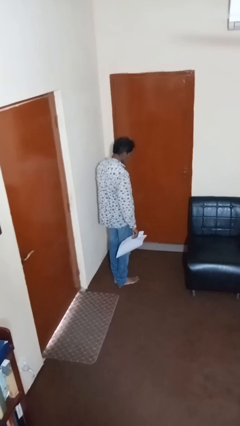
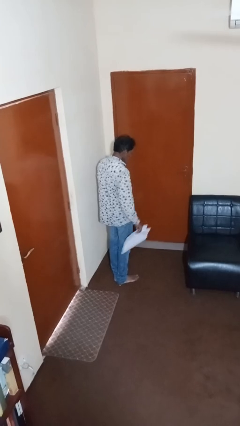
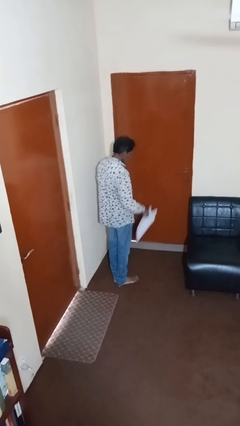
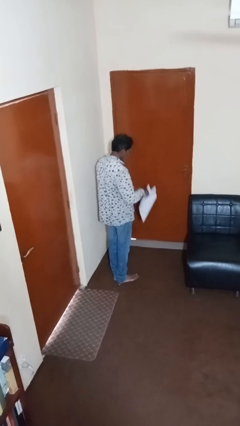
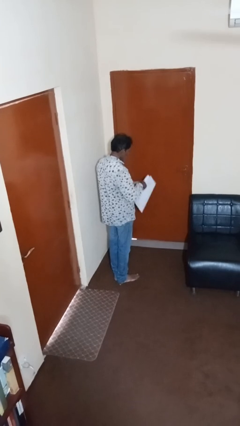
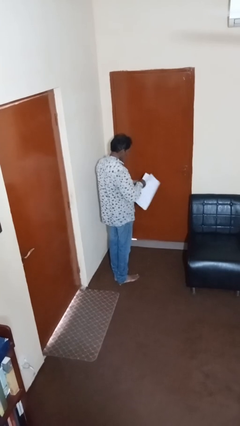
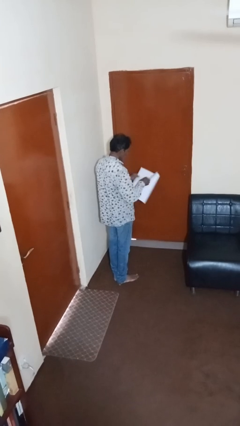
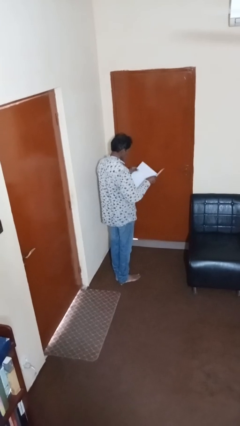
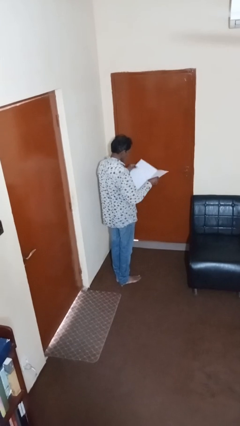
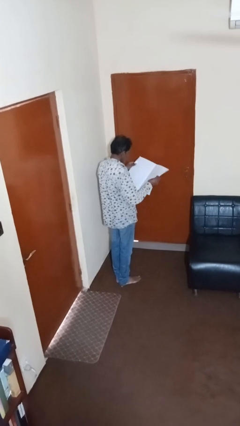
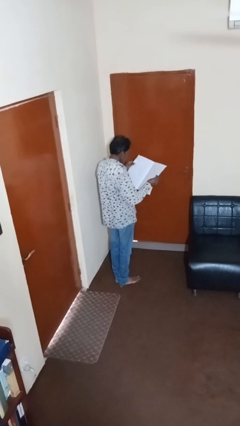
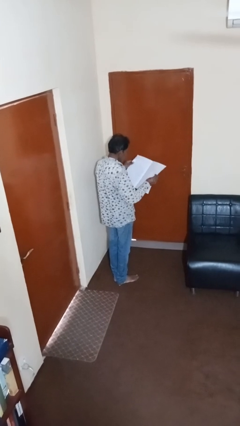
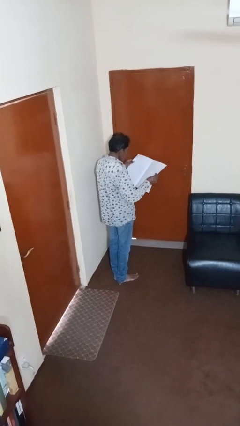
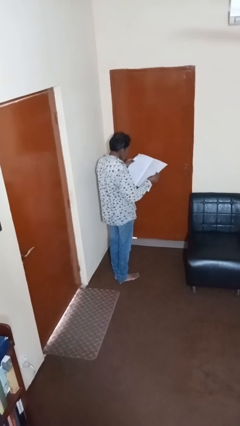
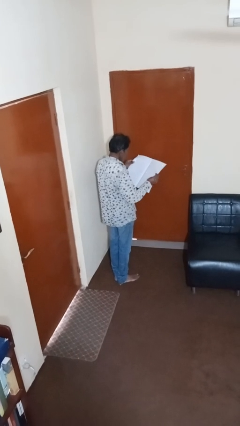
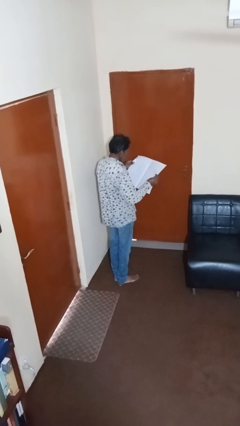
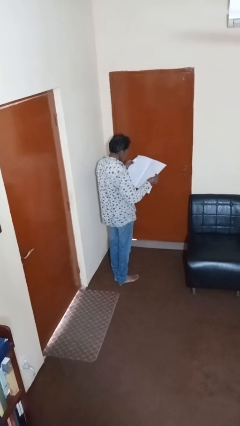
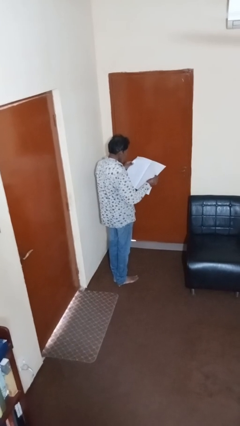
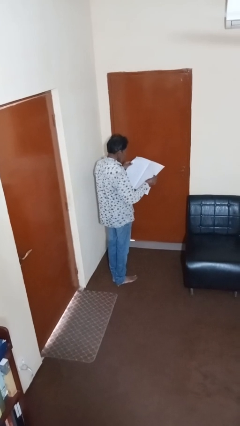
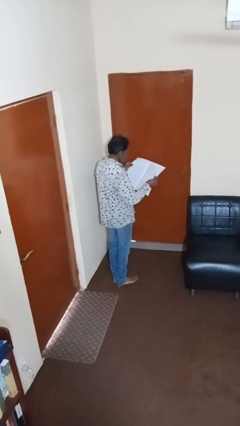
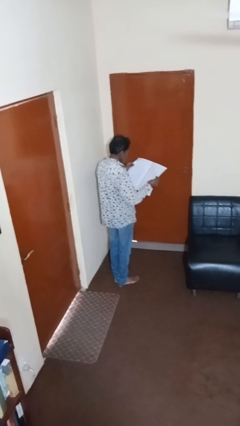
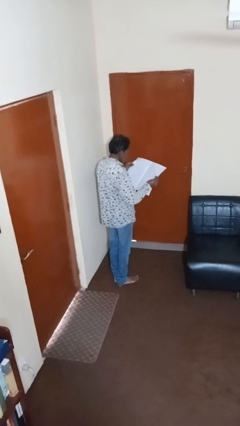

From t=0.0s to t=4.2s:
person reads newspaper

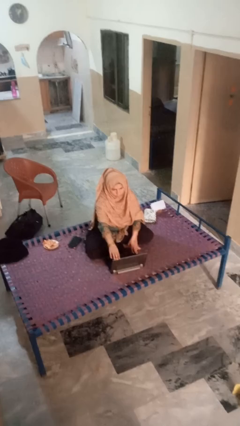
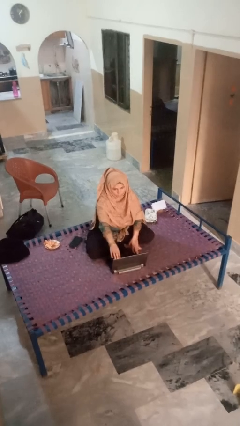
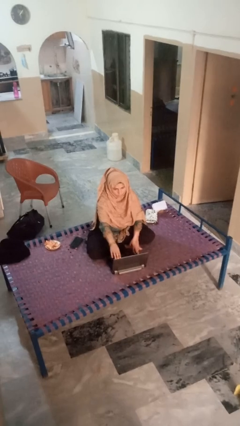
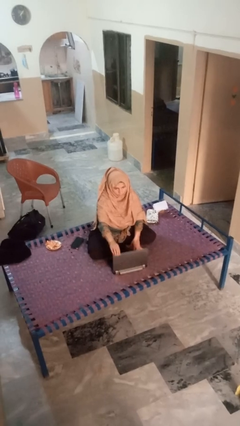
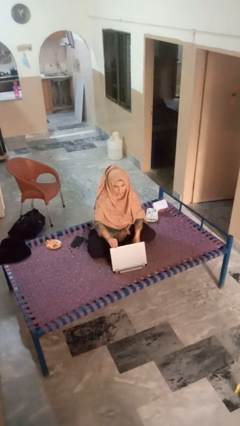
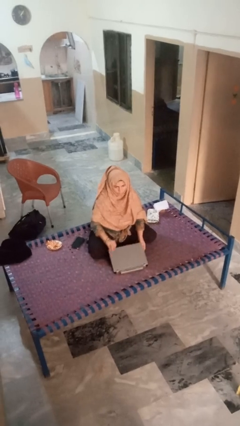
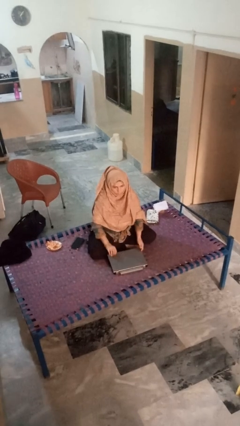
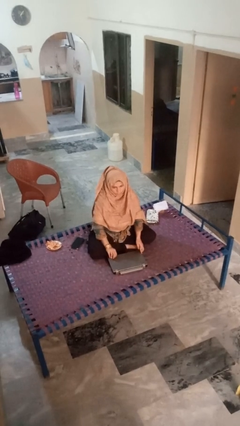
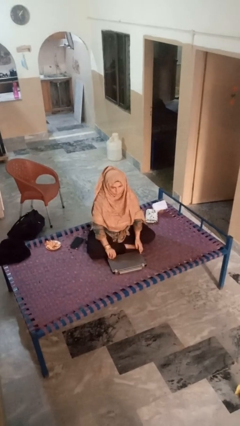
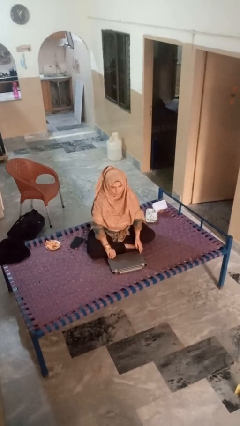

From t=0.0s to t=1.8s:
person closes laptop

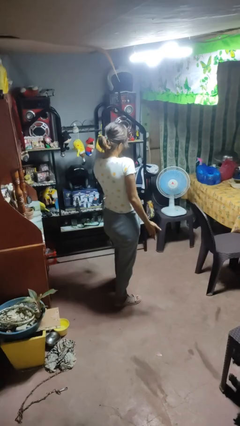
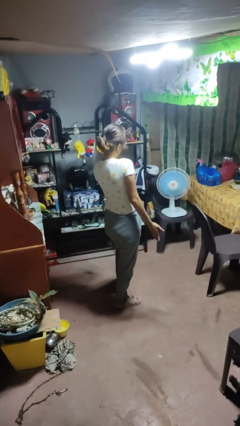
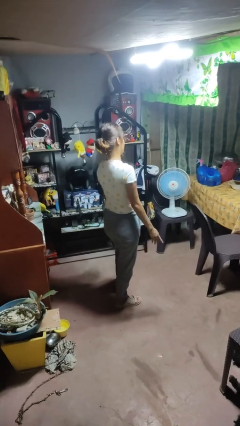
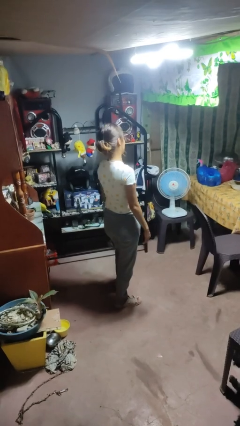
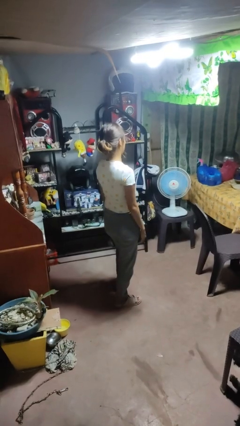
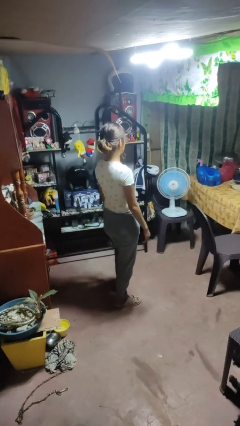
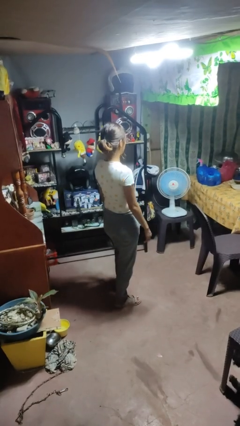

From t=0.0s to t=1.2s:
person shrugs

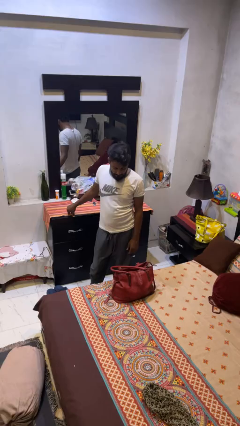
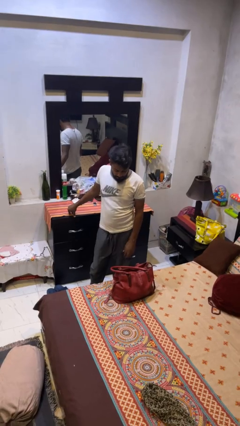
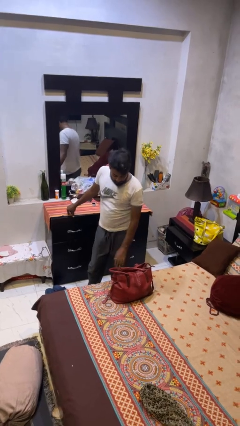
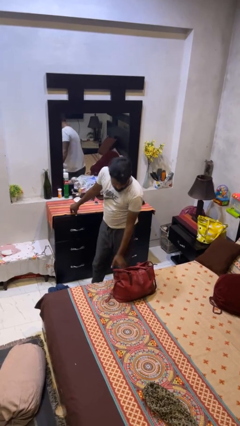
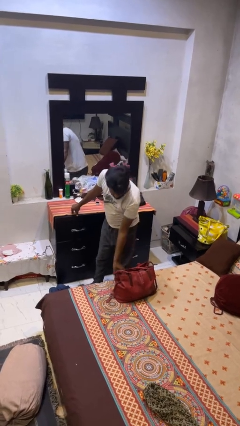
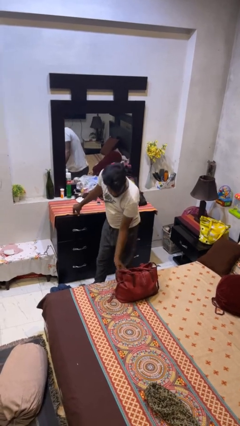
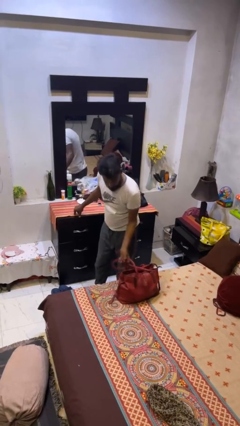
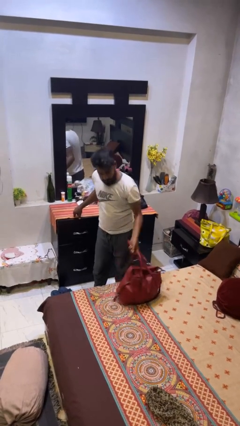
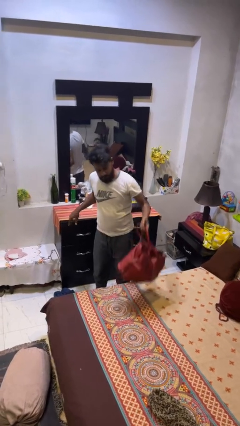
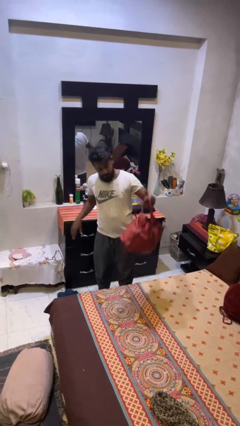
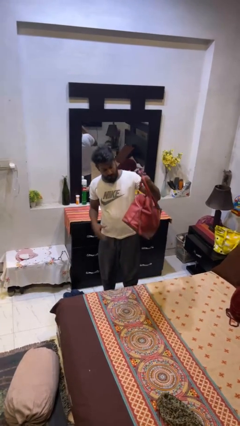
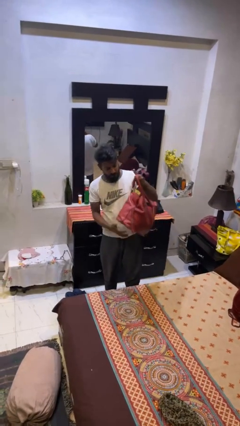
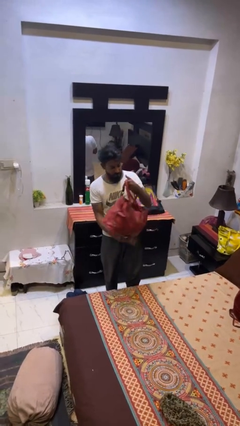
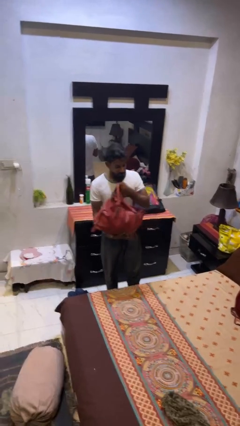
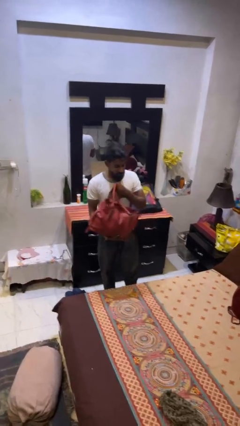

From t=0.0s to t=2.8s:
person picks up object from bed

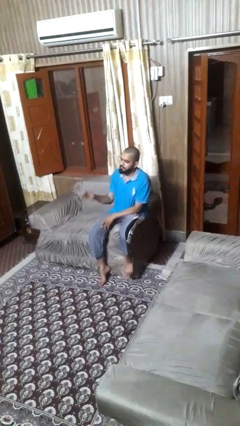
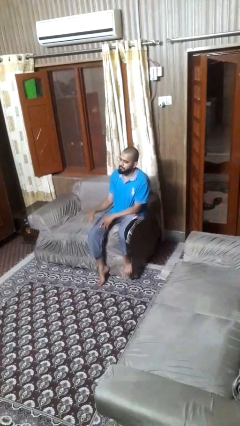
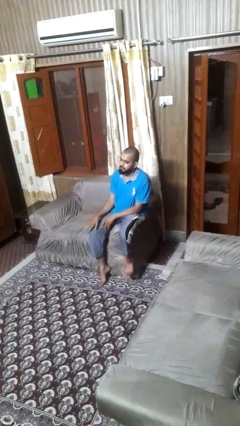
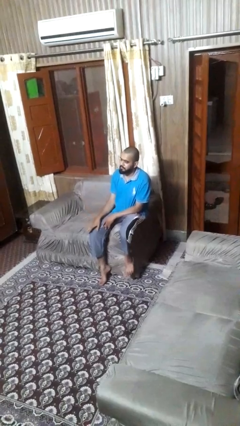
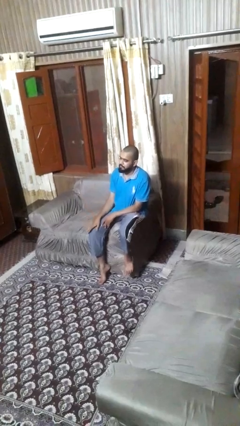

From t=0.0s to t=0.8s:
person gestures lower hand

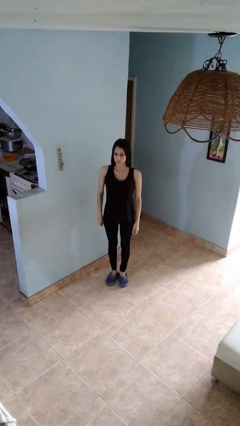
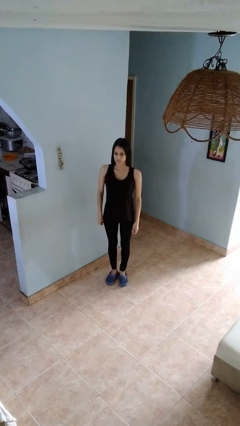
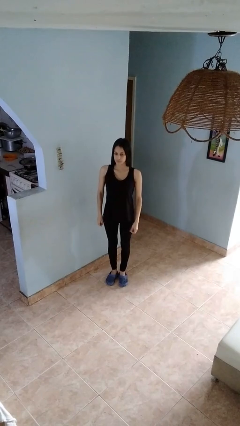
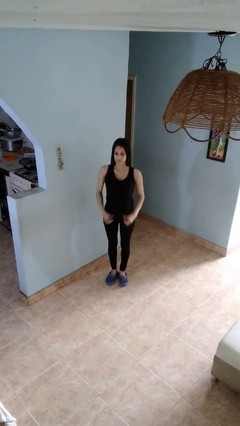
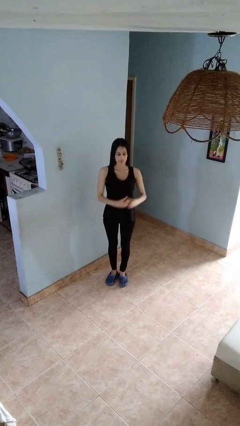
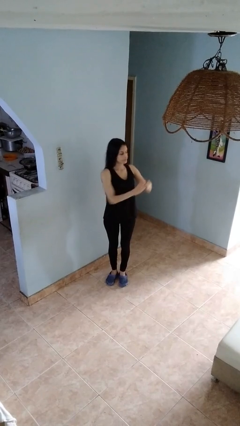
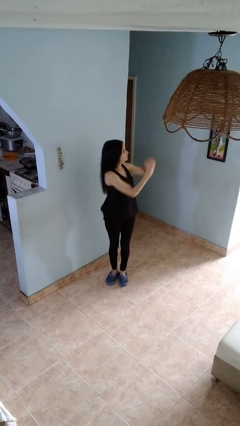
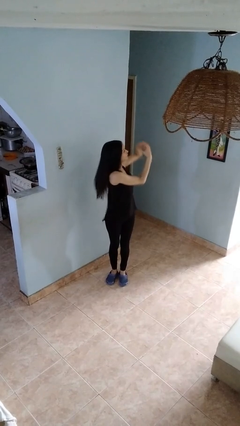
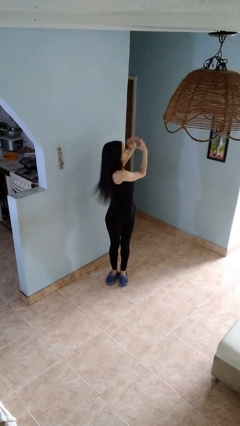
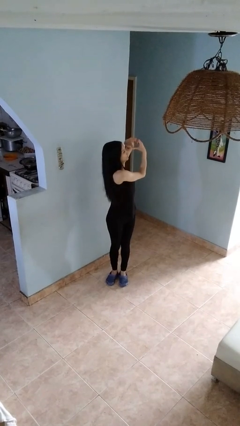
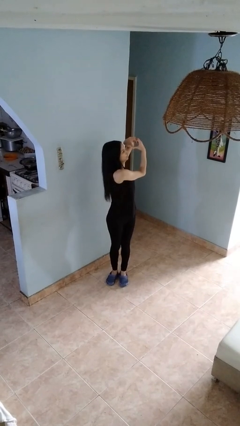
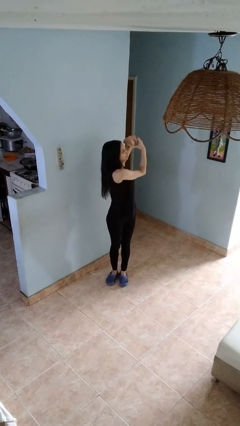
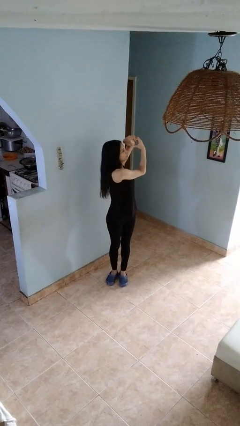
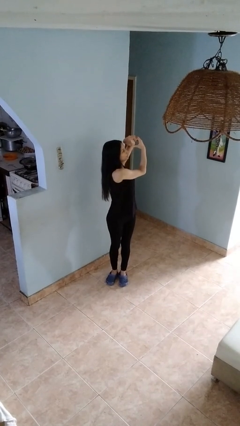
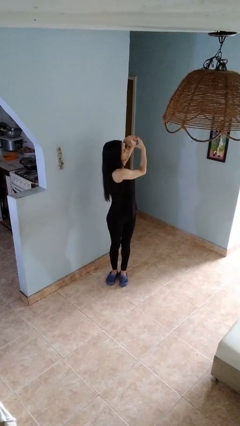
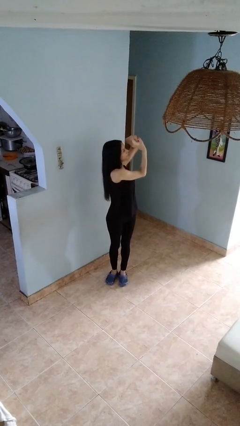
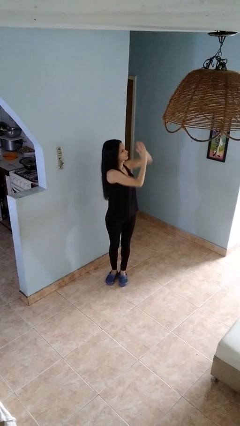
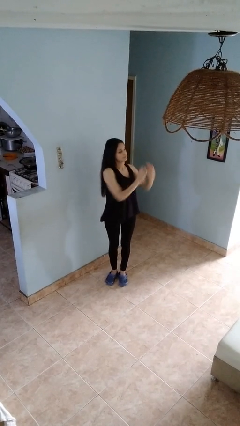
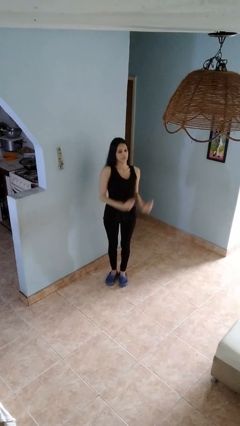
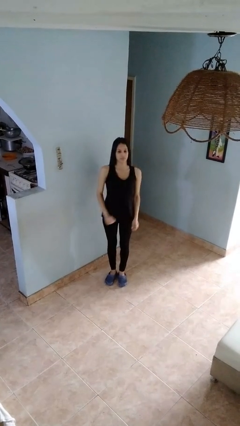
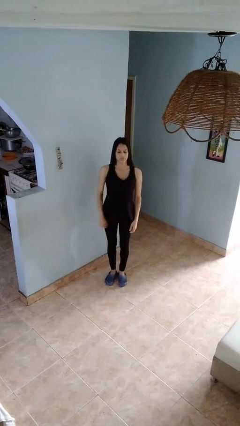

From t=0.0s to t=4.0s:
person gestures heart

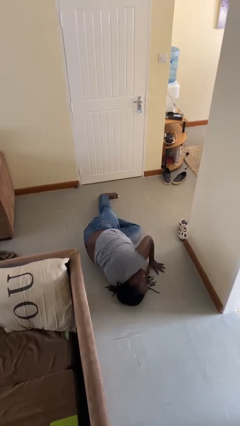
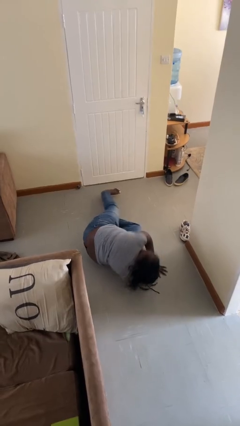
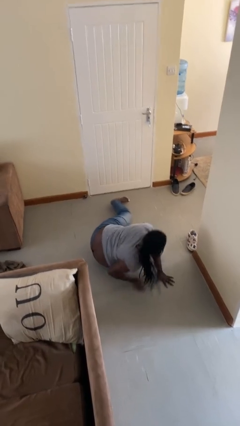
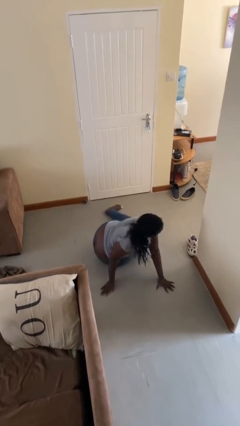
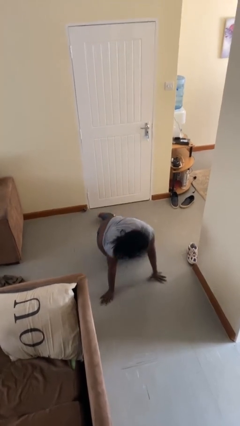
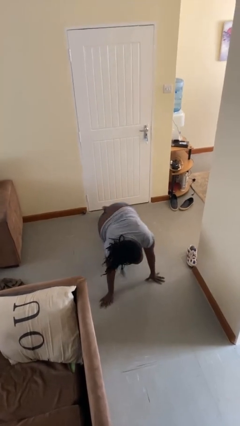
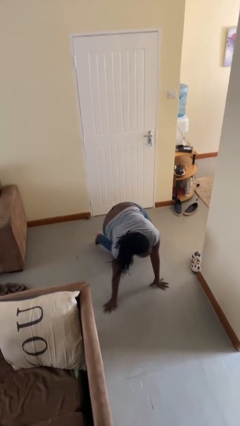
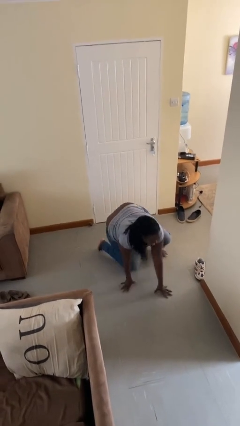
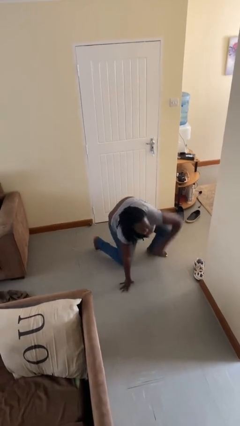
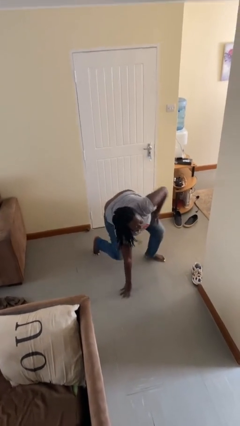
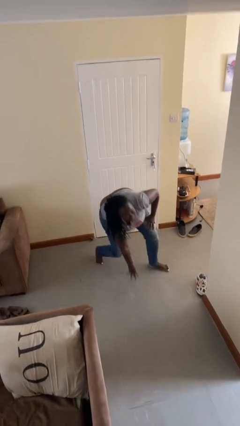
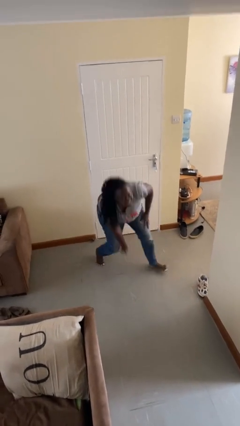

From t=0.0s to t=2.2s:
person stands up from floor

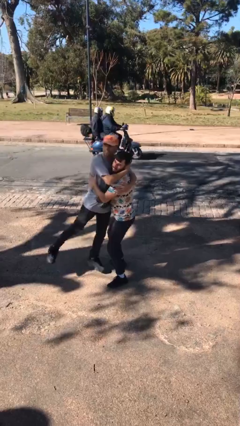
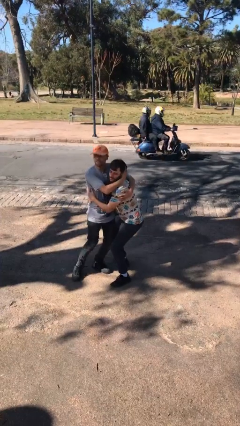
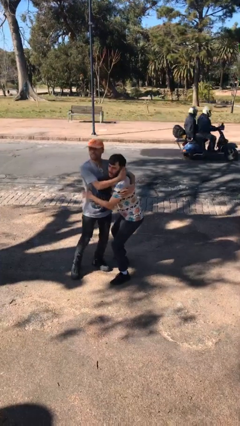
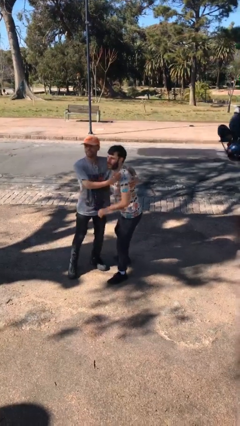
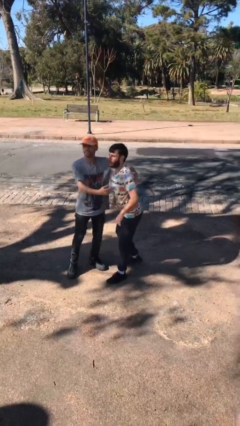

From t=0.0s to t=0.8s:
person puts down person
